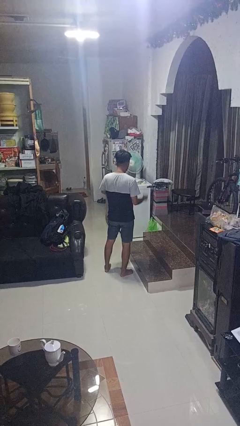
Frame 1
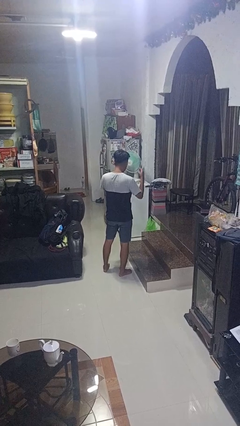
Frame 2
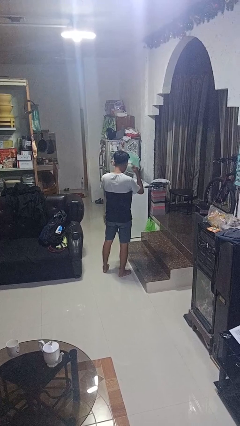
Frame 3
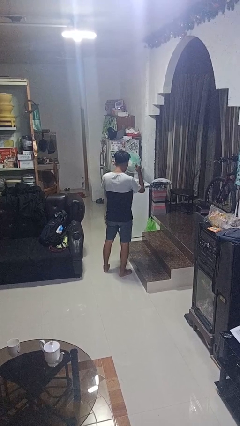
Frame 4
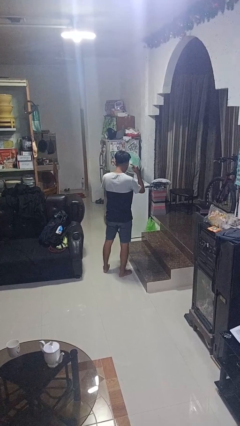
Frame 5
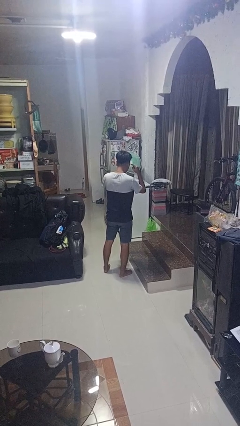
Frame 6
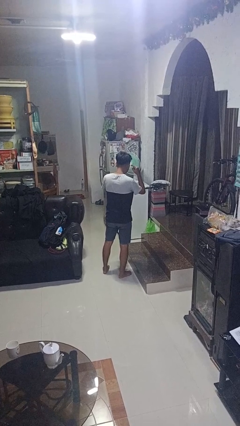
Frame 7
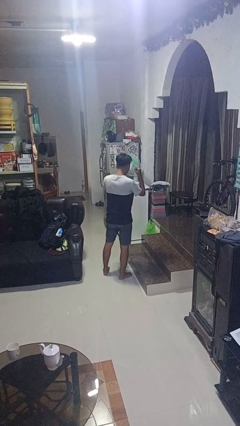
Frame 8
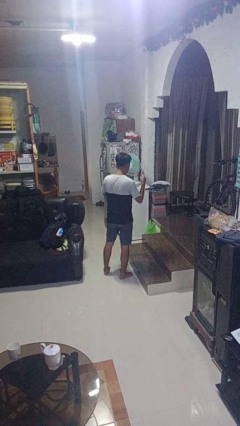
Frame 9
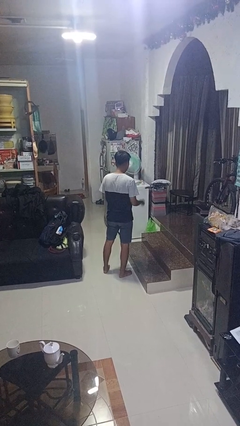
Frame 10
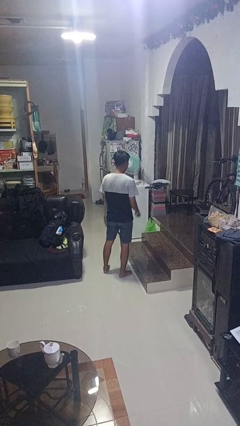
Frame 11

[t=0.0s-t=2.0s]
person gestures listen closely

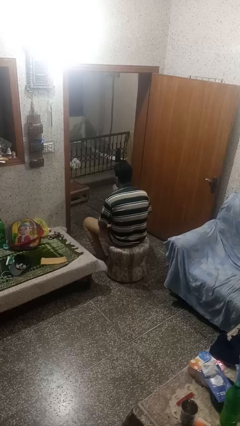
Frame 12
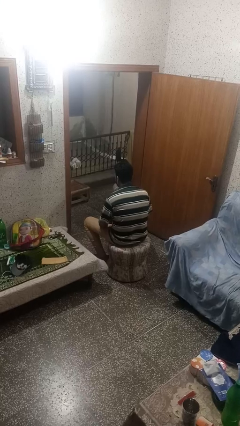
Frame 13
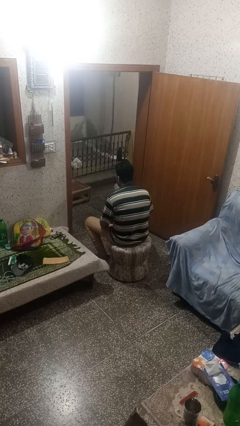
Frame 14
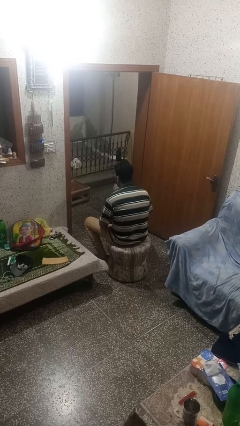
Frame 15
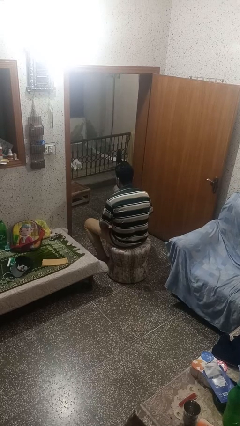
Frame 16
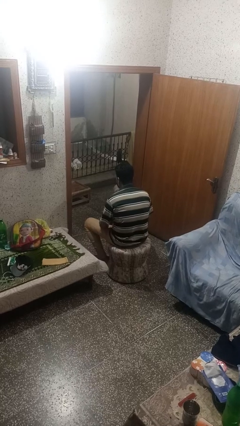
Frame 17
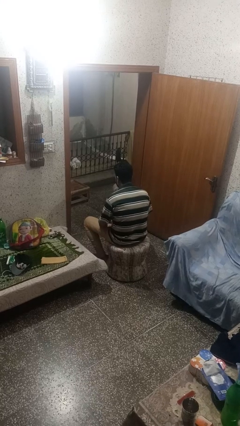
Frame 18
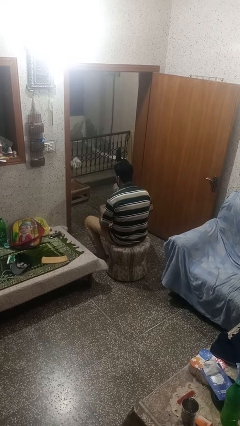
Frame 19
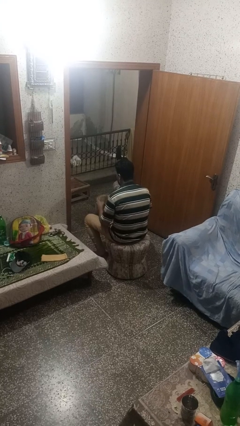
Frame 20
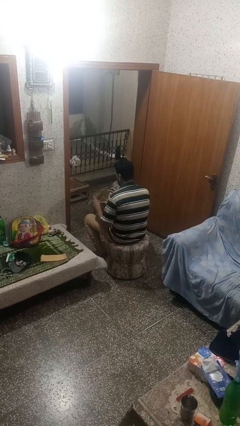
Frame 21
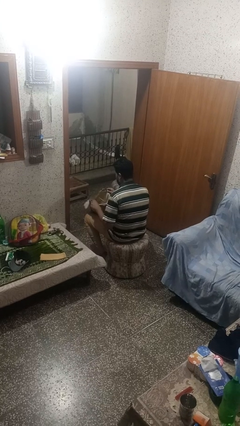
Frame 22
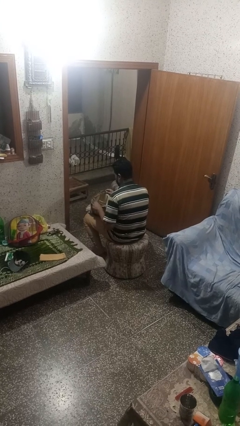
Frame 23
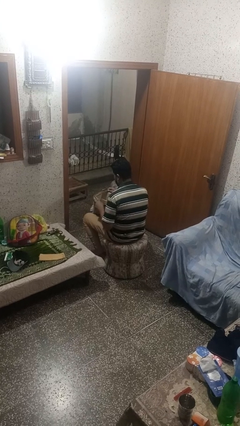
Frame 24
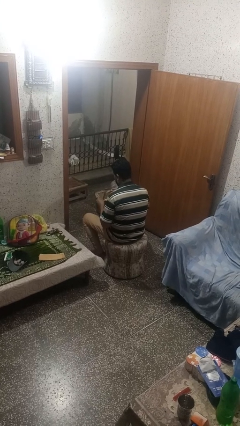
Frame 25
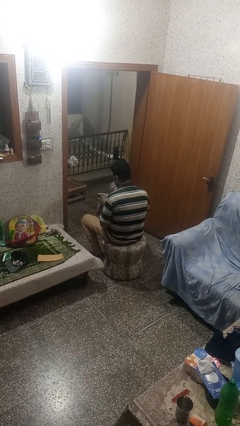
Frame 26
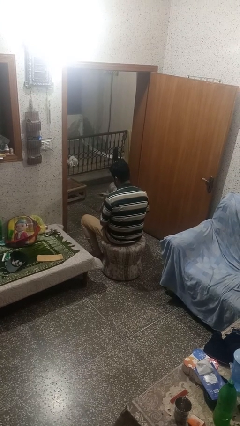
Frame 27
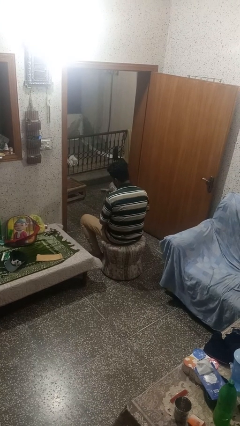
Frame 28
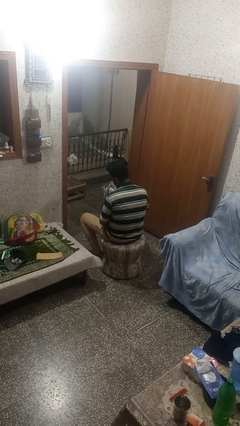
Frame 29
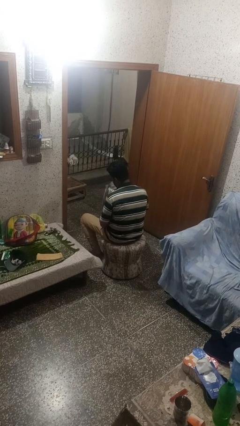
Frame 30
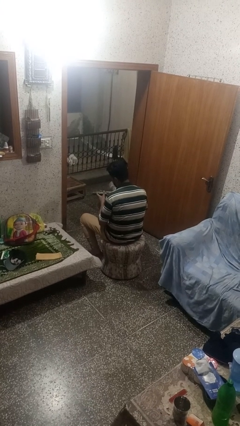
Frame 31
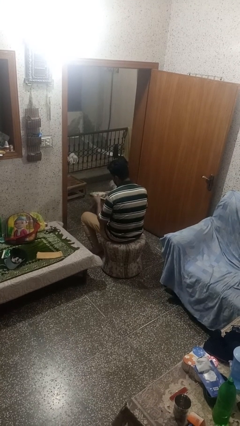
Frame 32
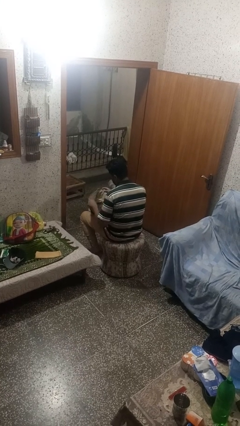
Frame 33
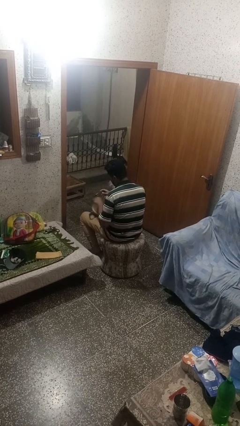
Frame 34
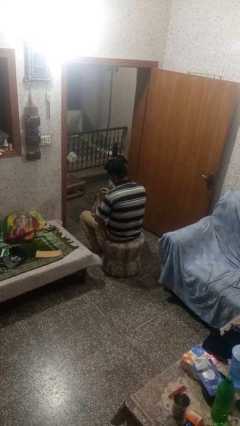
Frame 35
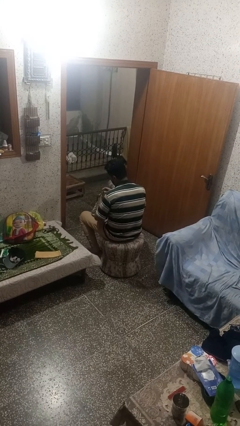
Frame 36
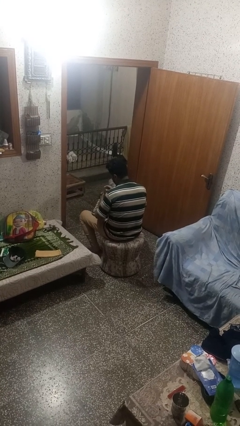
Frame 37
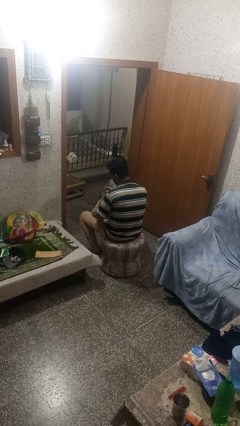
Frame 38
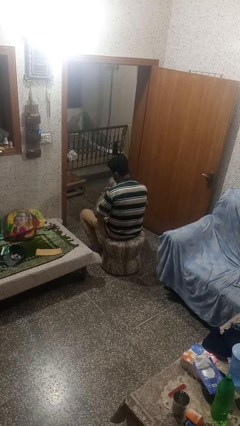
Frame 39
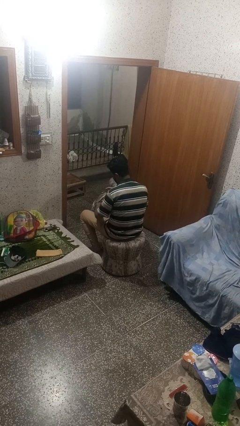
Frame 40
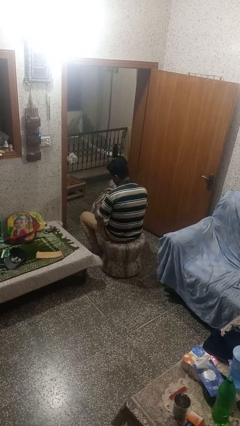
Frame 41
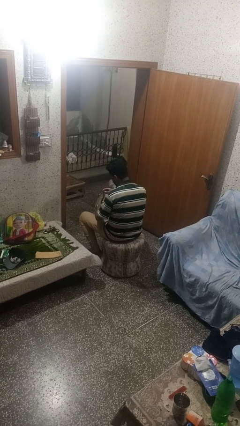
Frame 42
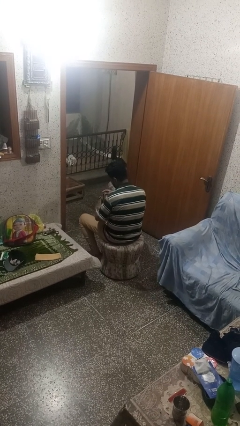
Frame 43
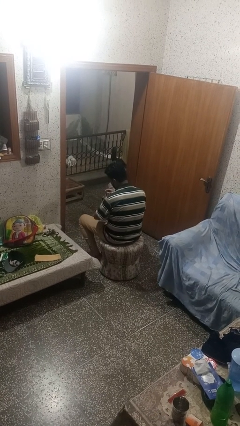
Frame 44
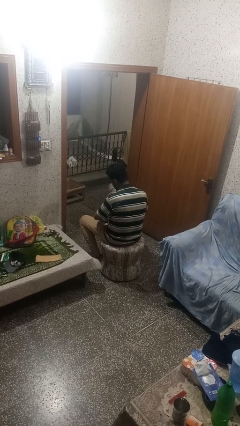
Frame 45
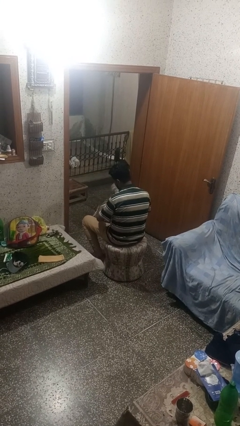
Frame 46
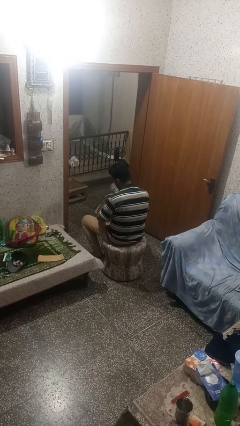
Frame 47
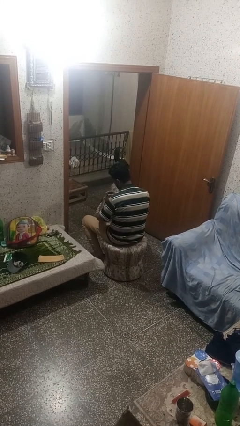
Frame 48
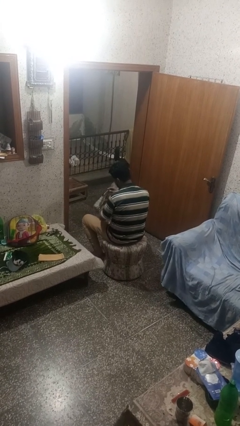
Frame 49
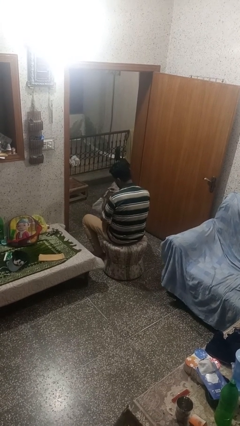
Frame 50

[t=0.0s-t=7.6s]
person searches in purse

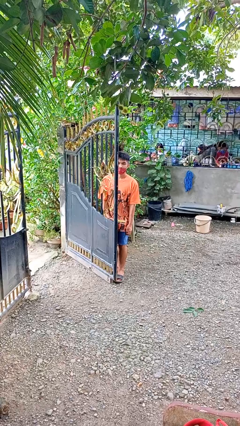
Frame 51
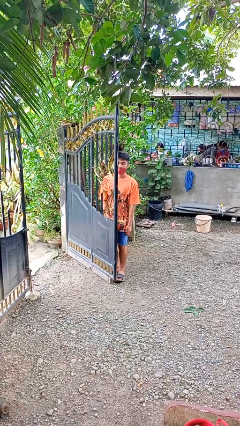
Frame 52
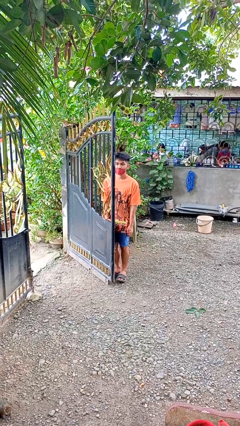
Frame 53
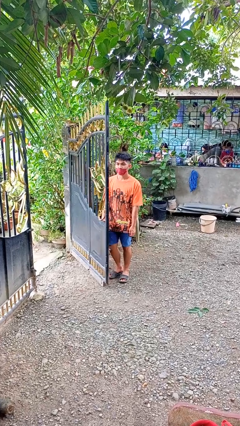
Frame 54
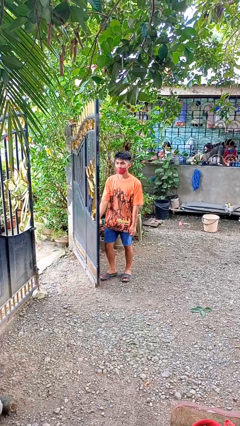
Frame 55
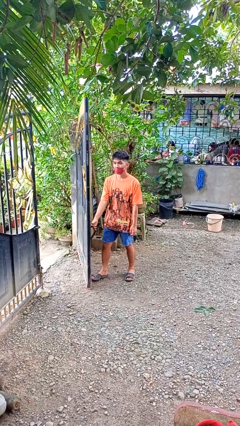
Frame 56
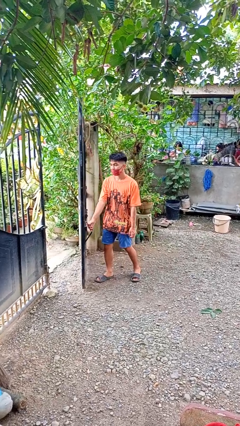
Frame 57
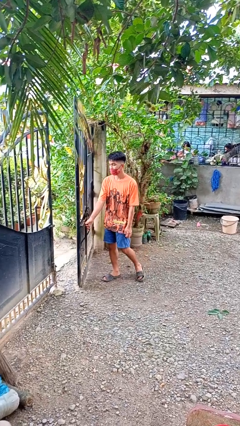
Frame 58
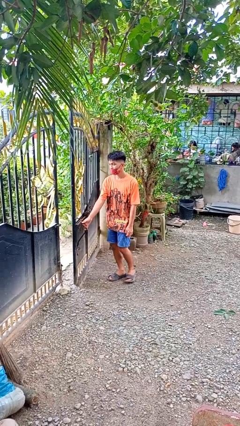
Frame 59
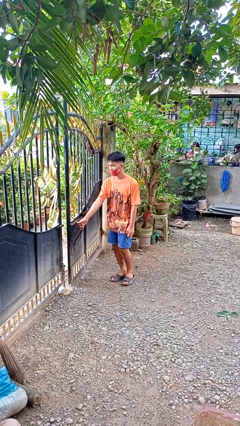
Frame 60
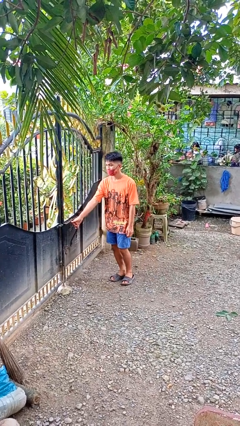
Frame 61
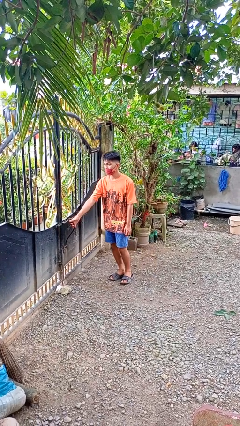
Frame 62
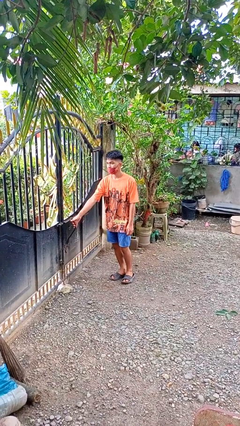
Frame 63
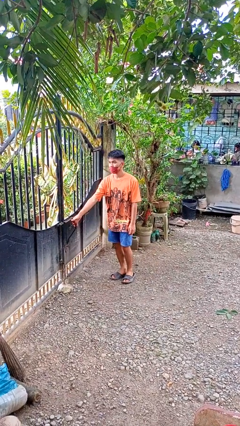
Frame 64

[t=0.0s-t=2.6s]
person closes gate

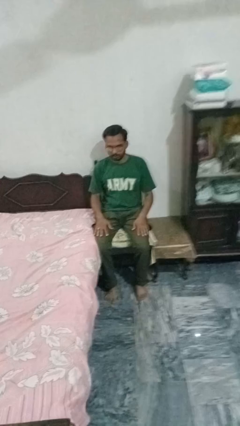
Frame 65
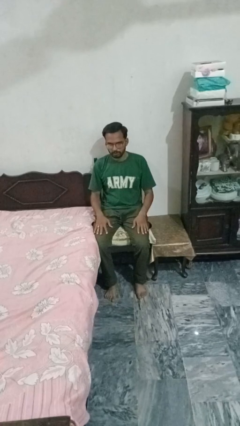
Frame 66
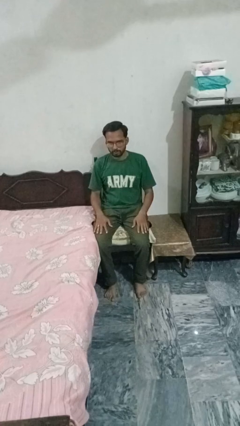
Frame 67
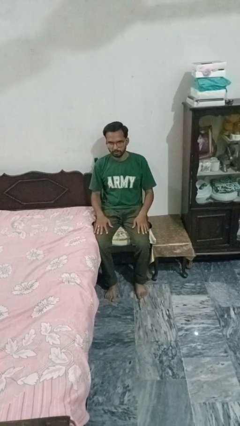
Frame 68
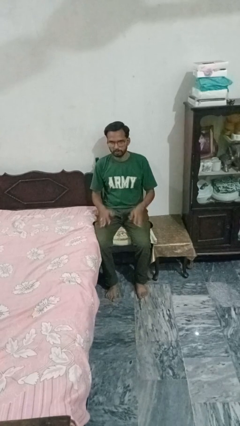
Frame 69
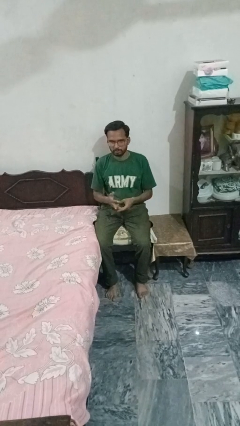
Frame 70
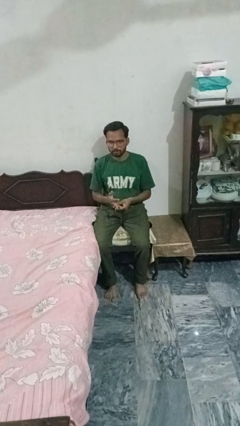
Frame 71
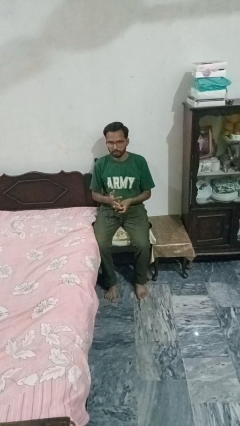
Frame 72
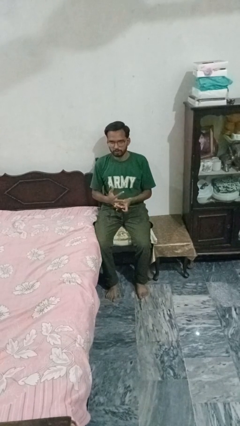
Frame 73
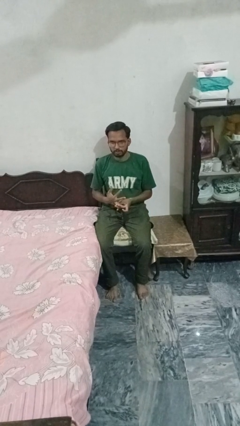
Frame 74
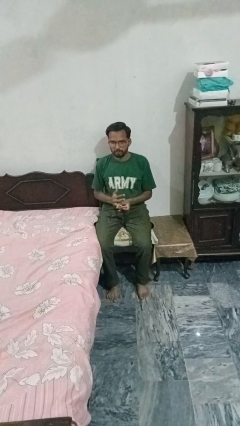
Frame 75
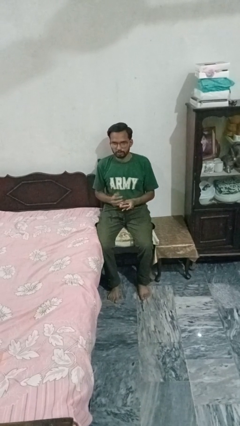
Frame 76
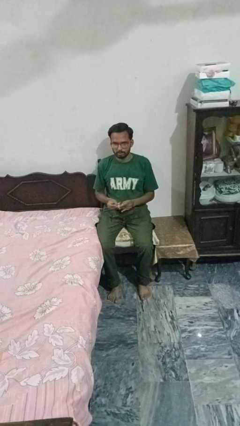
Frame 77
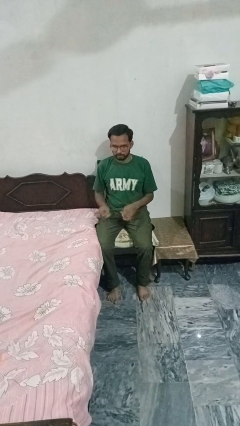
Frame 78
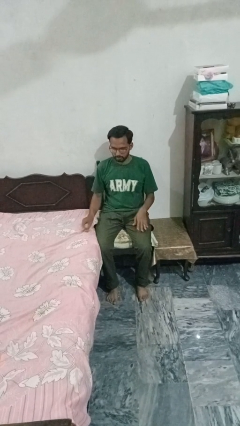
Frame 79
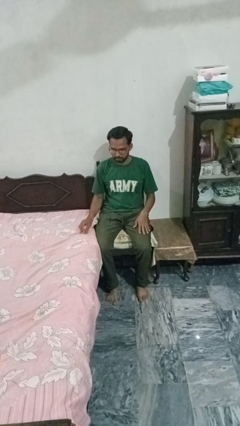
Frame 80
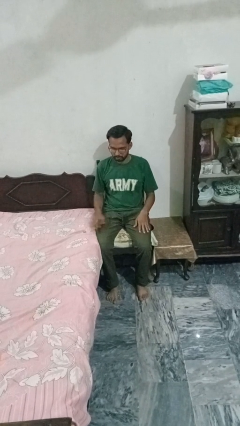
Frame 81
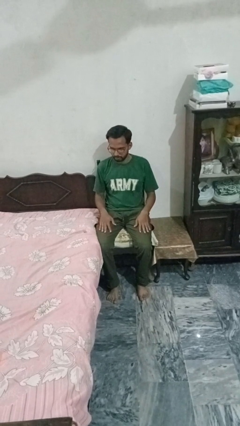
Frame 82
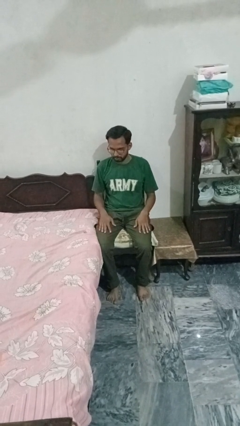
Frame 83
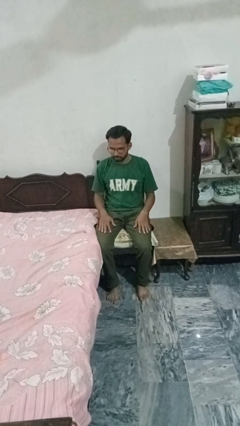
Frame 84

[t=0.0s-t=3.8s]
person takes off ring

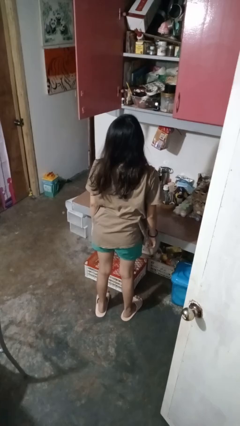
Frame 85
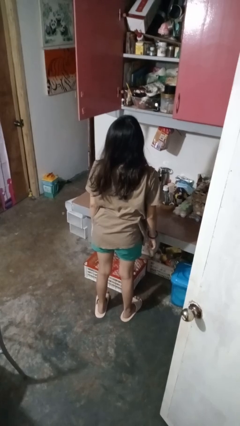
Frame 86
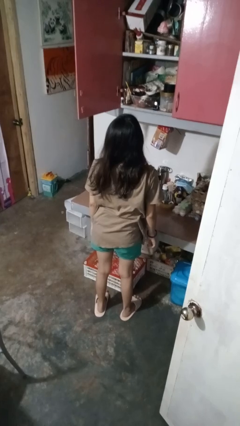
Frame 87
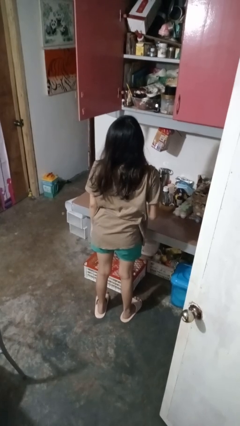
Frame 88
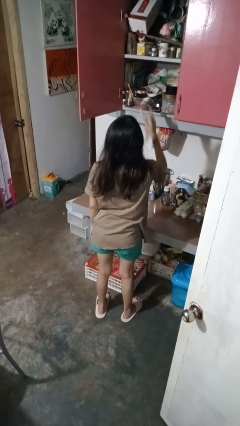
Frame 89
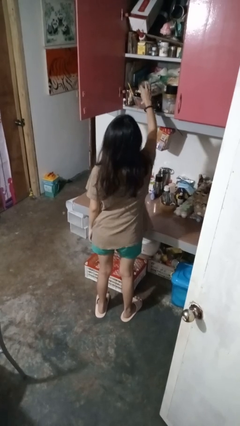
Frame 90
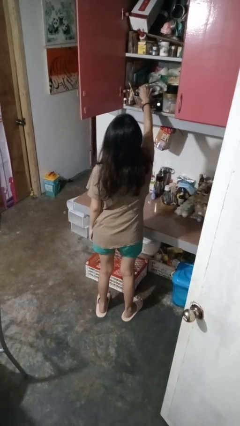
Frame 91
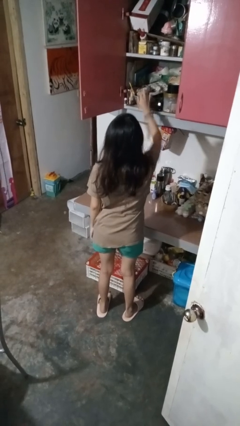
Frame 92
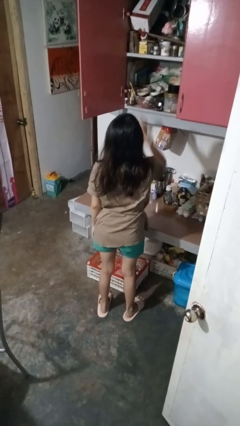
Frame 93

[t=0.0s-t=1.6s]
person puts object in cabinet
